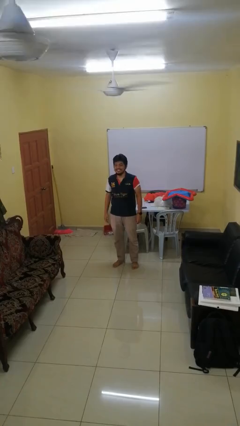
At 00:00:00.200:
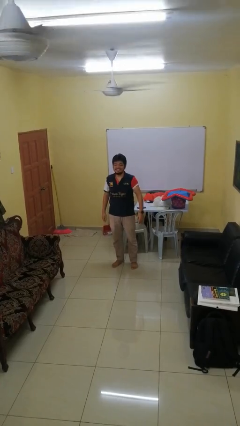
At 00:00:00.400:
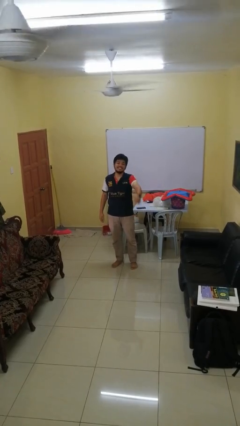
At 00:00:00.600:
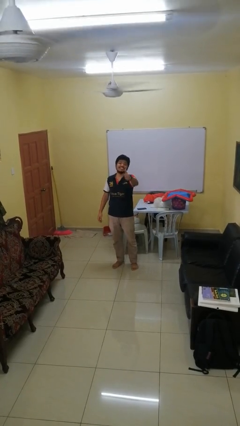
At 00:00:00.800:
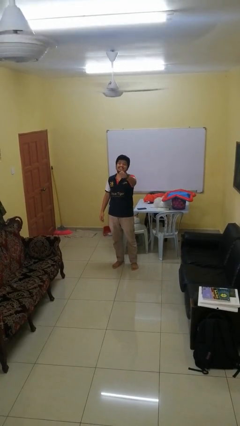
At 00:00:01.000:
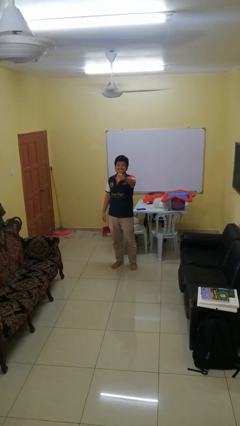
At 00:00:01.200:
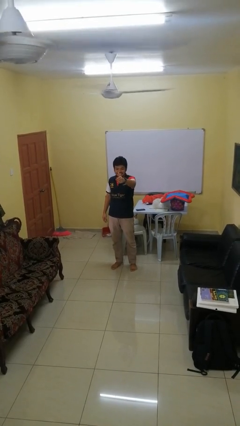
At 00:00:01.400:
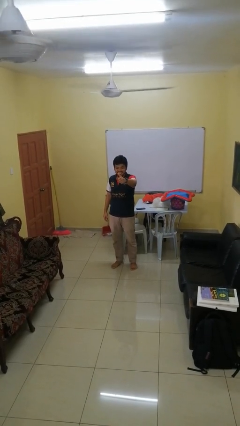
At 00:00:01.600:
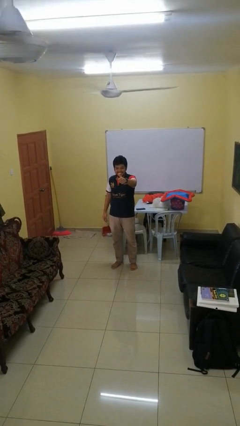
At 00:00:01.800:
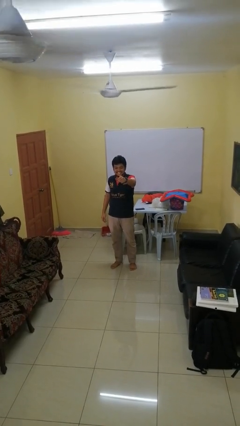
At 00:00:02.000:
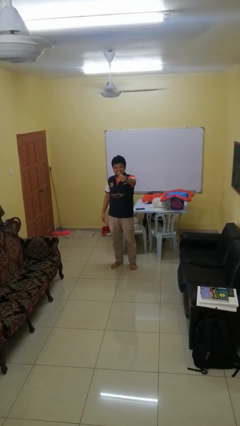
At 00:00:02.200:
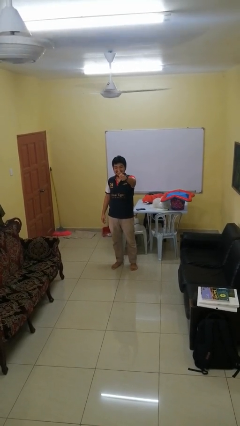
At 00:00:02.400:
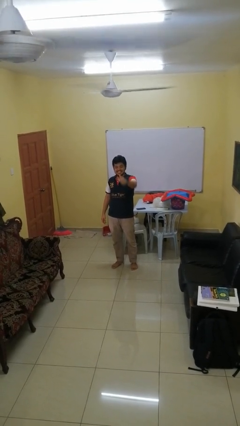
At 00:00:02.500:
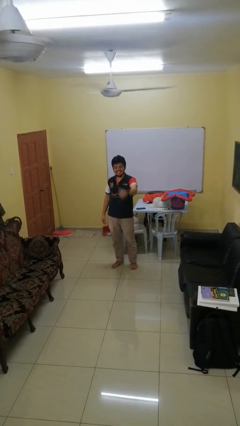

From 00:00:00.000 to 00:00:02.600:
person gestures thumbs up

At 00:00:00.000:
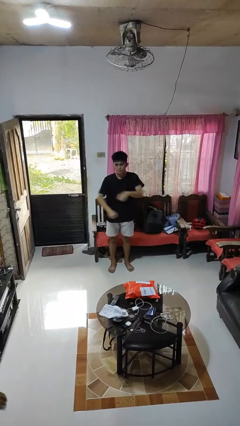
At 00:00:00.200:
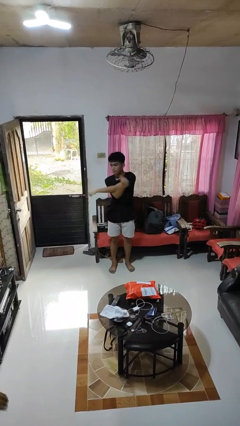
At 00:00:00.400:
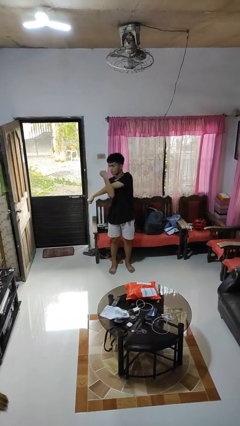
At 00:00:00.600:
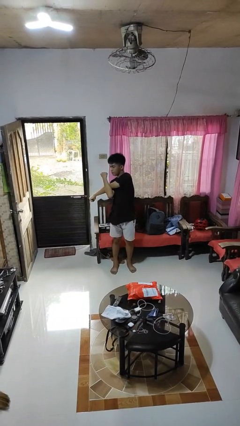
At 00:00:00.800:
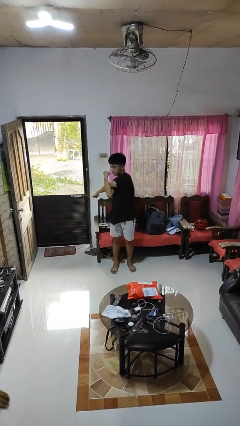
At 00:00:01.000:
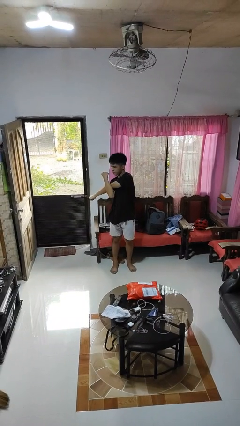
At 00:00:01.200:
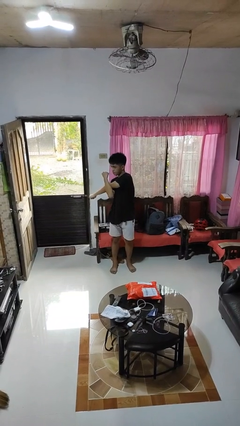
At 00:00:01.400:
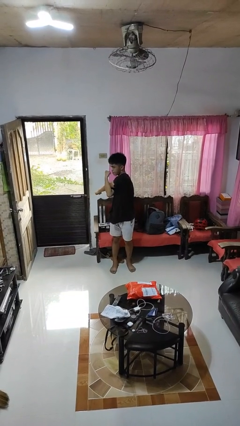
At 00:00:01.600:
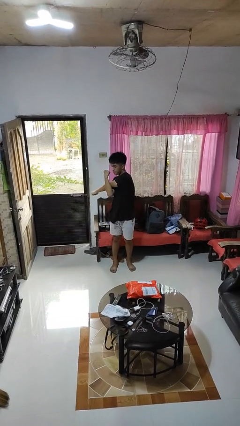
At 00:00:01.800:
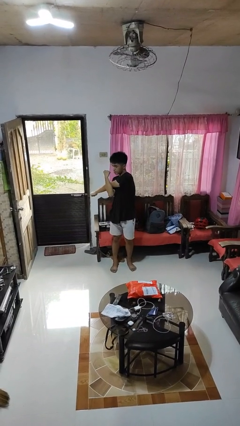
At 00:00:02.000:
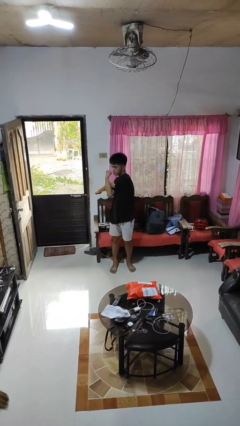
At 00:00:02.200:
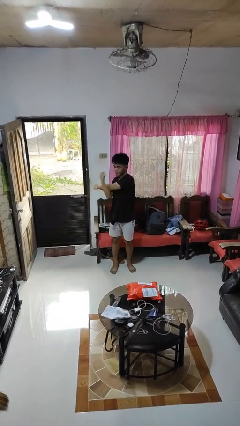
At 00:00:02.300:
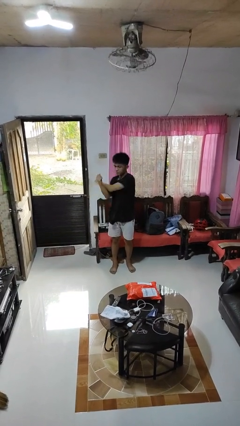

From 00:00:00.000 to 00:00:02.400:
person stretches arms to side

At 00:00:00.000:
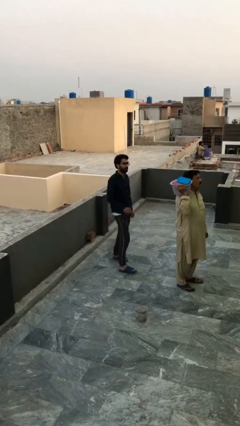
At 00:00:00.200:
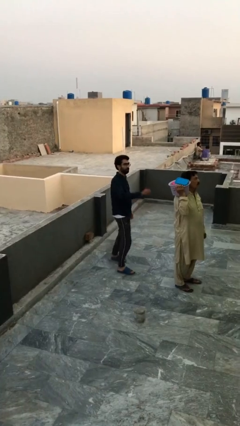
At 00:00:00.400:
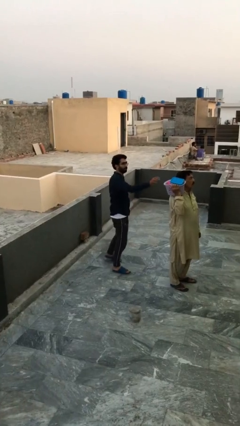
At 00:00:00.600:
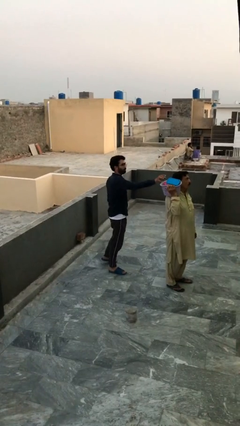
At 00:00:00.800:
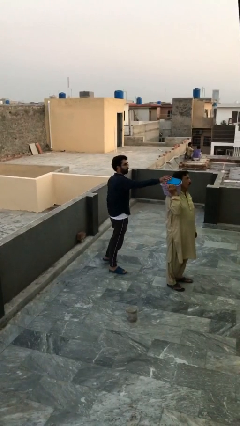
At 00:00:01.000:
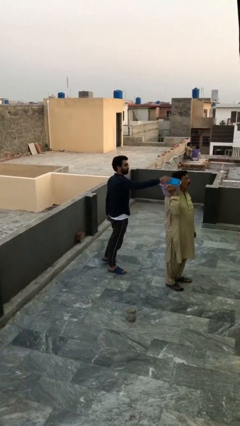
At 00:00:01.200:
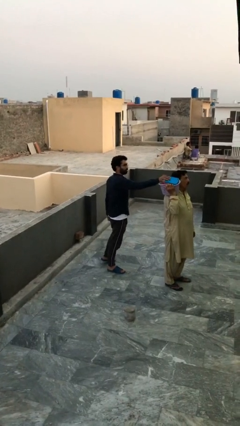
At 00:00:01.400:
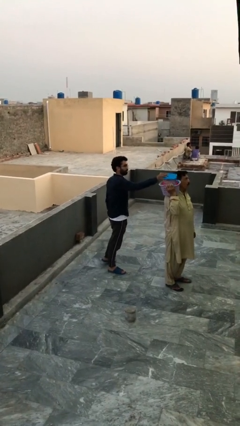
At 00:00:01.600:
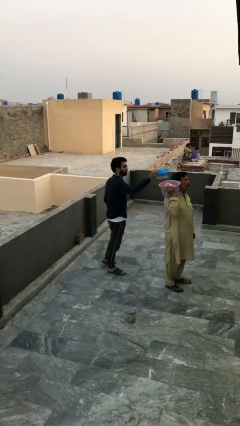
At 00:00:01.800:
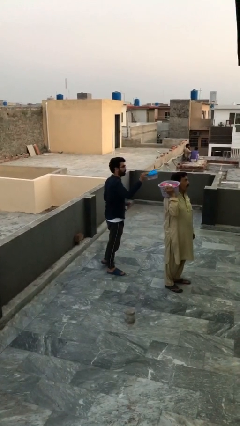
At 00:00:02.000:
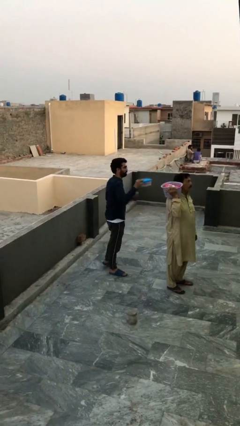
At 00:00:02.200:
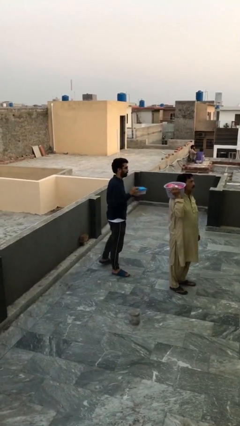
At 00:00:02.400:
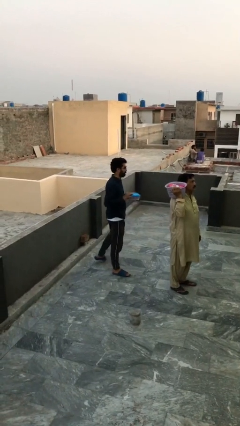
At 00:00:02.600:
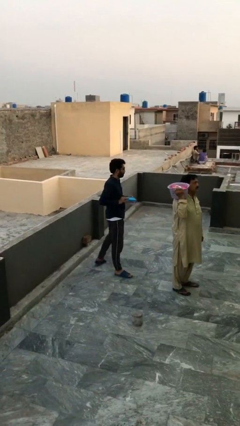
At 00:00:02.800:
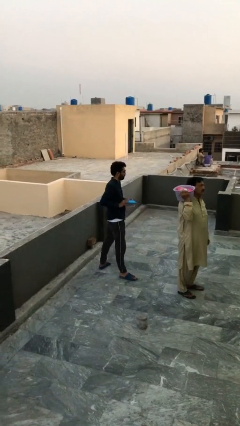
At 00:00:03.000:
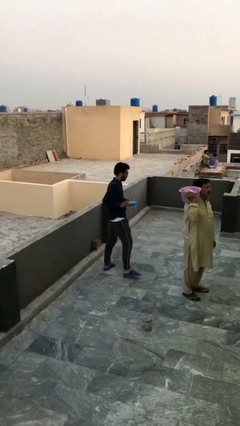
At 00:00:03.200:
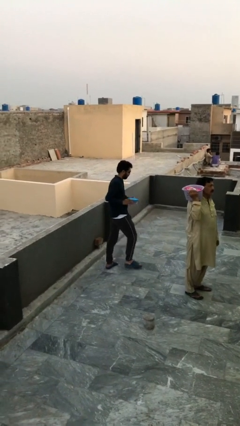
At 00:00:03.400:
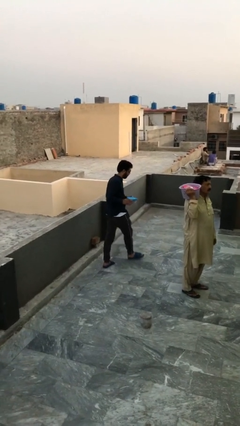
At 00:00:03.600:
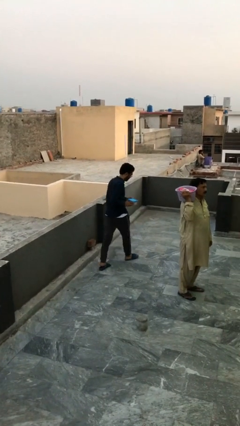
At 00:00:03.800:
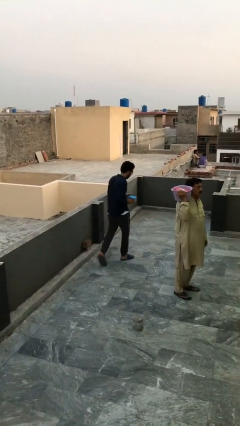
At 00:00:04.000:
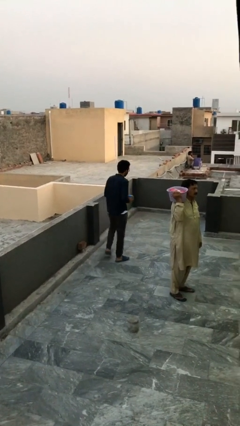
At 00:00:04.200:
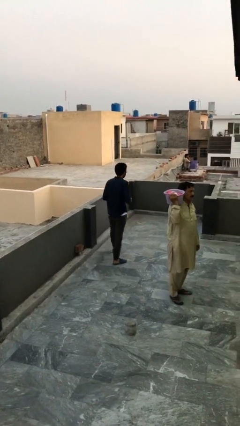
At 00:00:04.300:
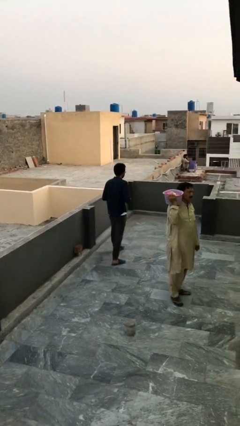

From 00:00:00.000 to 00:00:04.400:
person steals object from person

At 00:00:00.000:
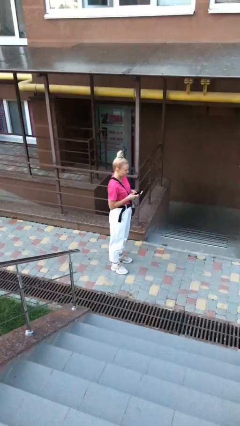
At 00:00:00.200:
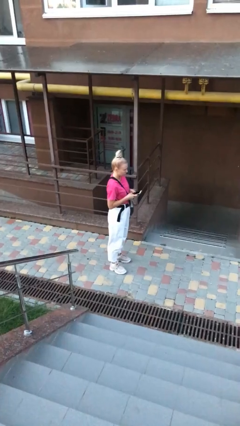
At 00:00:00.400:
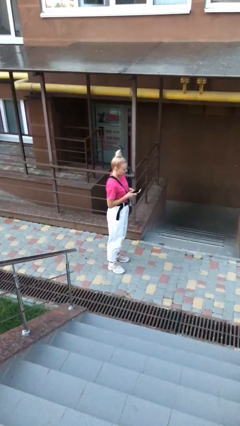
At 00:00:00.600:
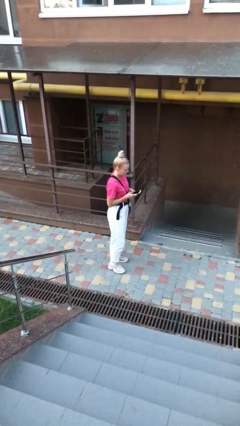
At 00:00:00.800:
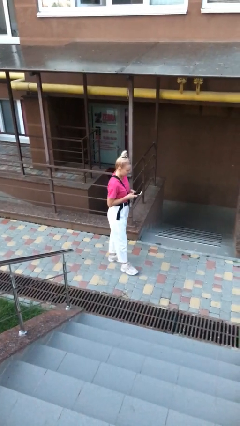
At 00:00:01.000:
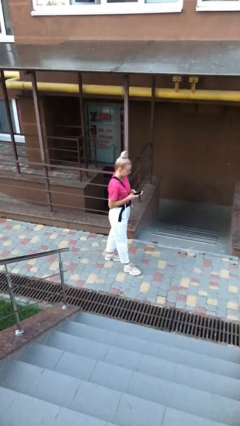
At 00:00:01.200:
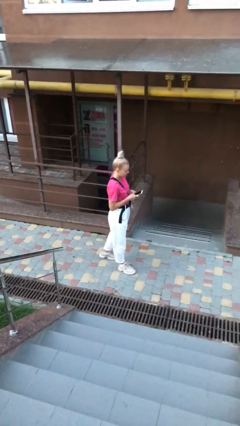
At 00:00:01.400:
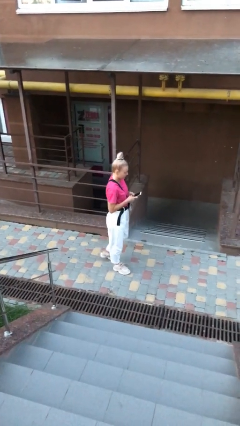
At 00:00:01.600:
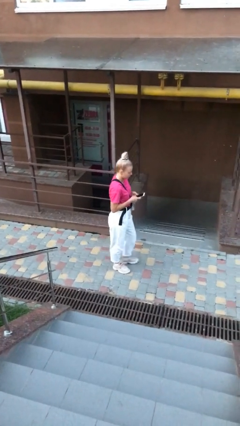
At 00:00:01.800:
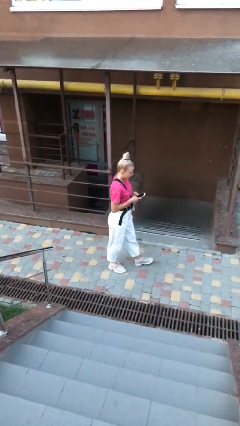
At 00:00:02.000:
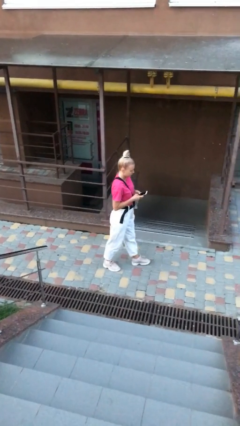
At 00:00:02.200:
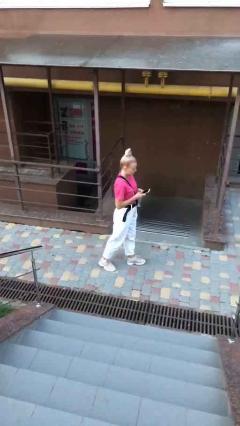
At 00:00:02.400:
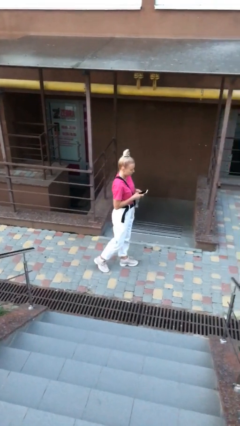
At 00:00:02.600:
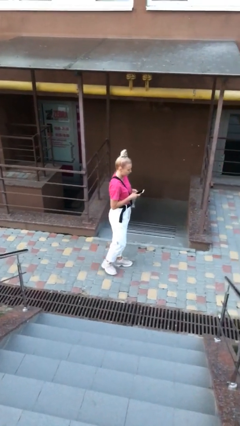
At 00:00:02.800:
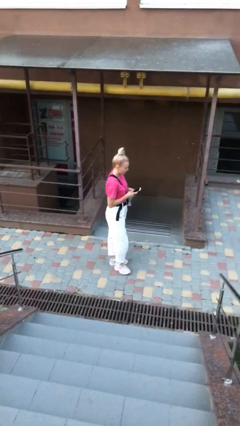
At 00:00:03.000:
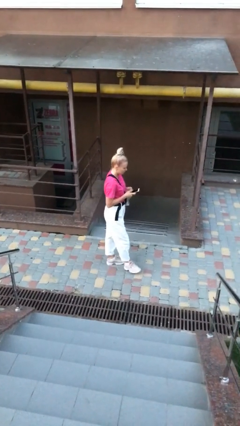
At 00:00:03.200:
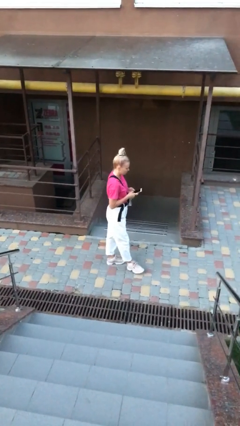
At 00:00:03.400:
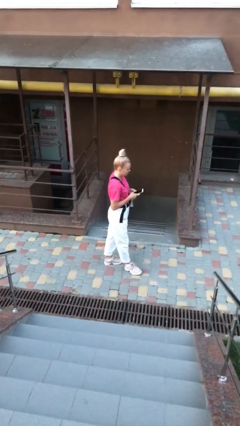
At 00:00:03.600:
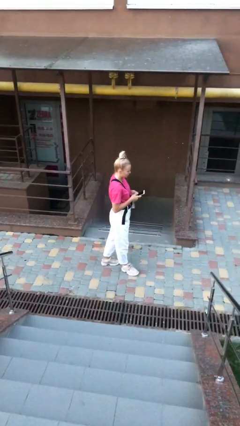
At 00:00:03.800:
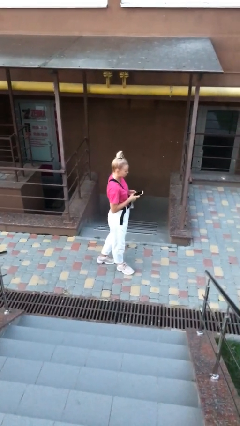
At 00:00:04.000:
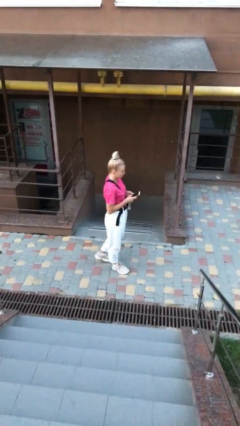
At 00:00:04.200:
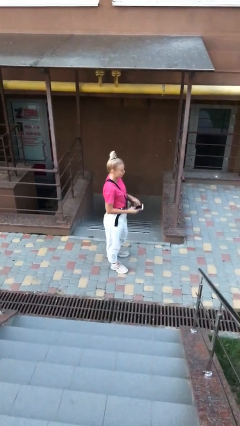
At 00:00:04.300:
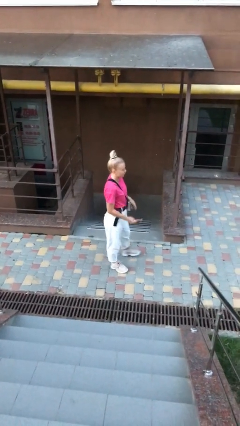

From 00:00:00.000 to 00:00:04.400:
person texts on phone

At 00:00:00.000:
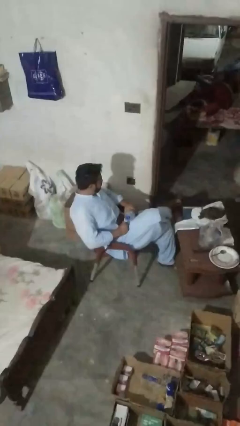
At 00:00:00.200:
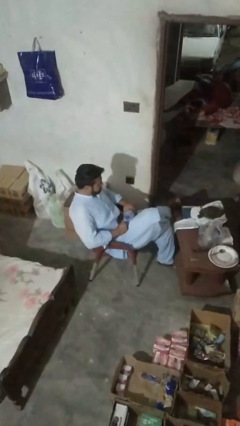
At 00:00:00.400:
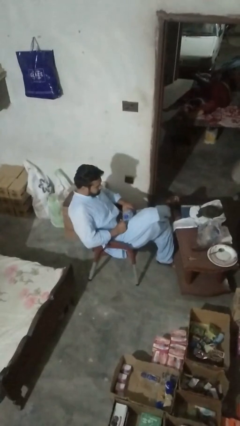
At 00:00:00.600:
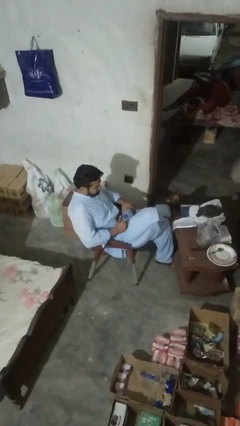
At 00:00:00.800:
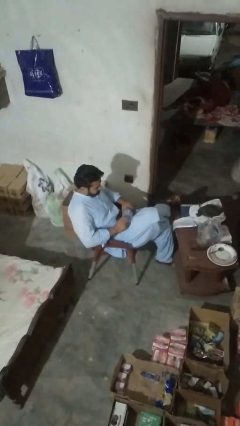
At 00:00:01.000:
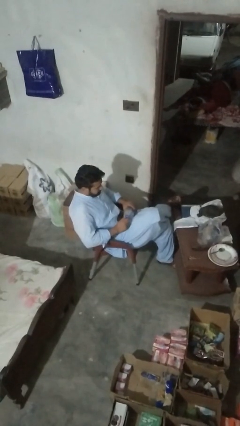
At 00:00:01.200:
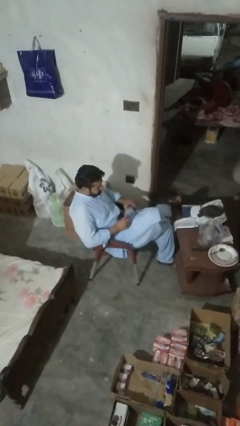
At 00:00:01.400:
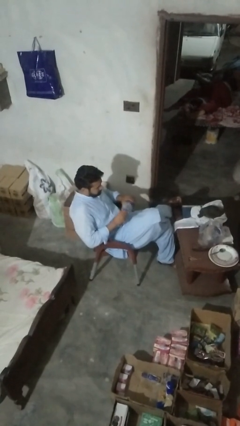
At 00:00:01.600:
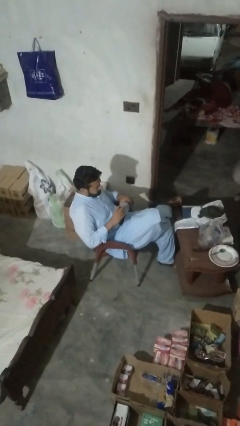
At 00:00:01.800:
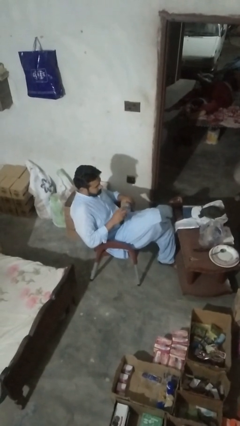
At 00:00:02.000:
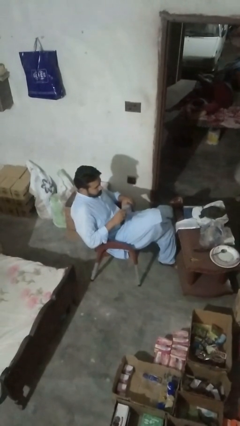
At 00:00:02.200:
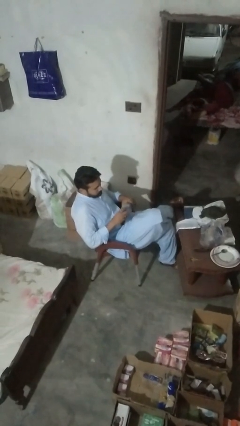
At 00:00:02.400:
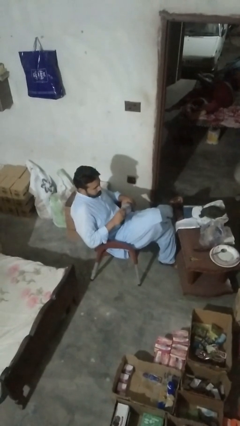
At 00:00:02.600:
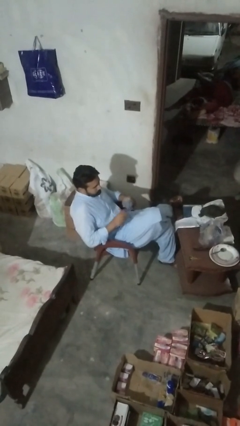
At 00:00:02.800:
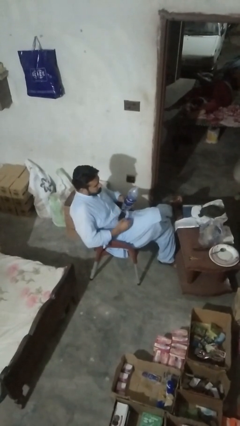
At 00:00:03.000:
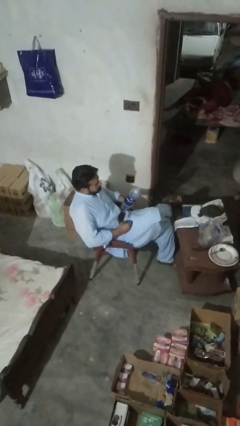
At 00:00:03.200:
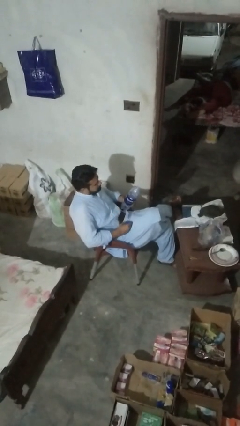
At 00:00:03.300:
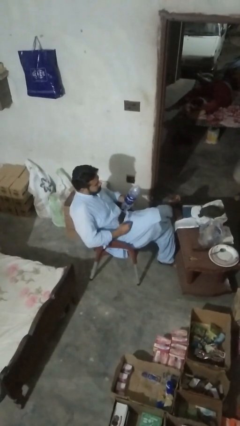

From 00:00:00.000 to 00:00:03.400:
person unscrews lid from bottle
